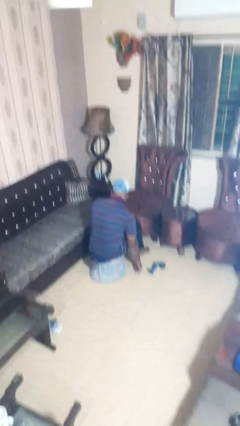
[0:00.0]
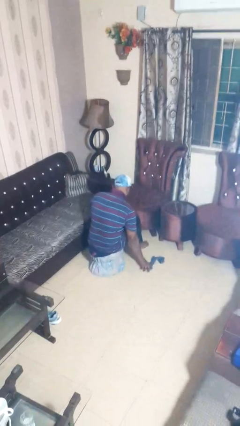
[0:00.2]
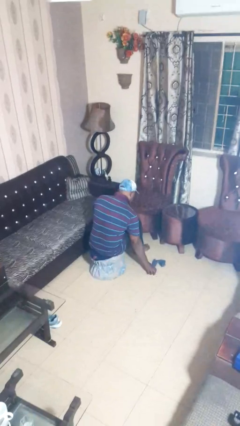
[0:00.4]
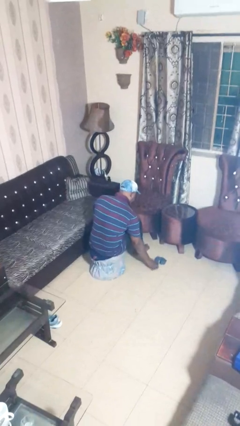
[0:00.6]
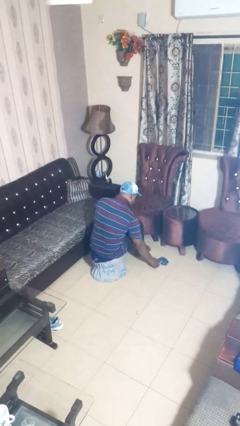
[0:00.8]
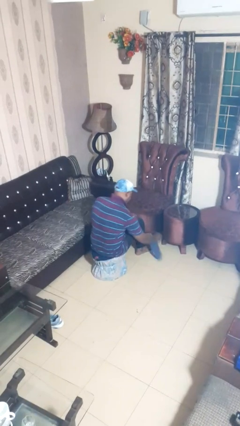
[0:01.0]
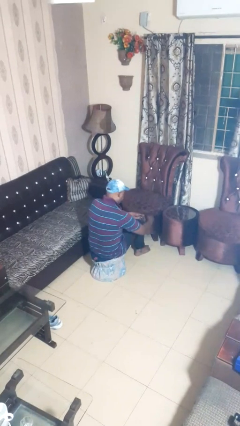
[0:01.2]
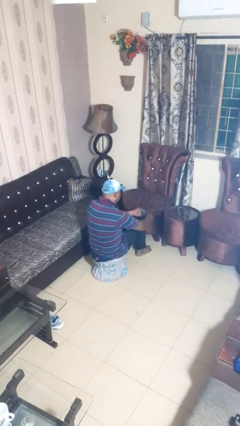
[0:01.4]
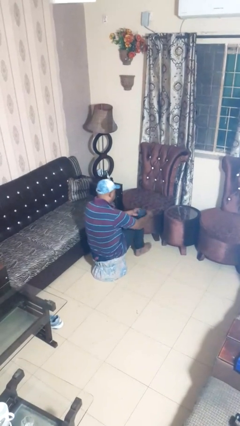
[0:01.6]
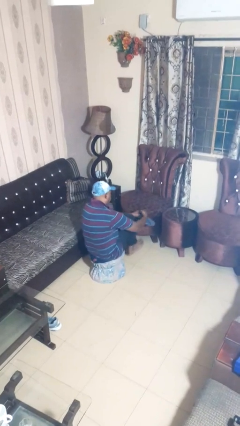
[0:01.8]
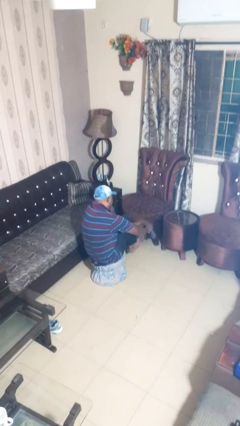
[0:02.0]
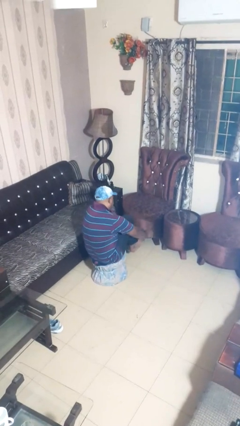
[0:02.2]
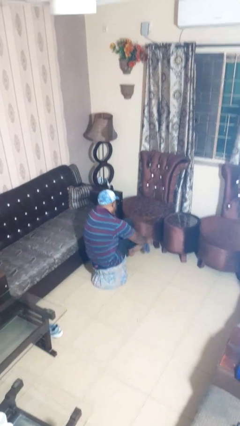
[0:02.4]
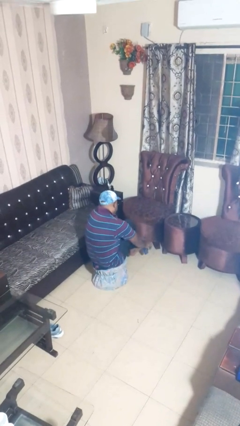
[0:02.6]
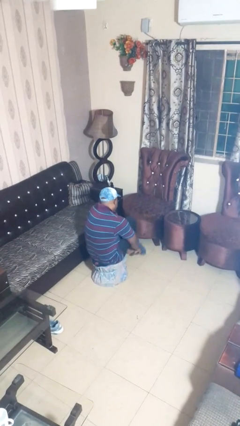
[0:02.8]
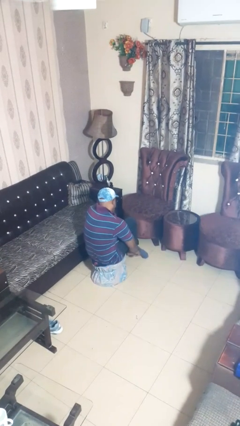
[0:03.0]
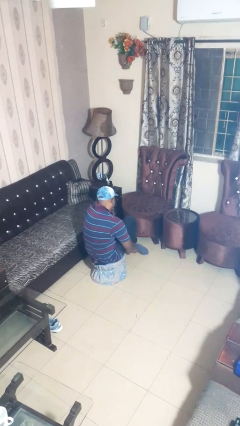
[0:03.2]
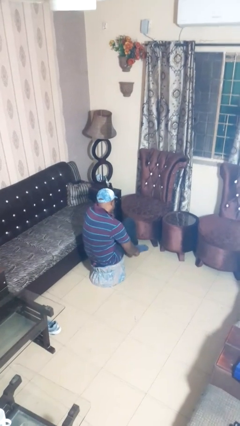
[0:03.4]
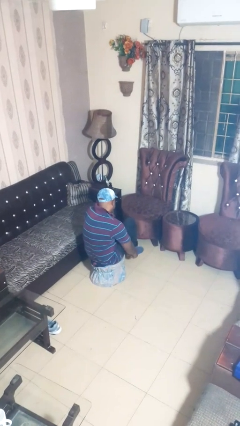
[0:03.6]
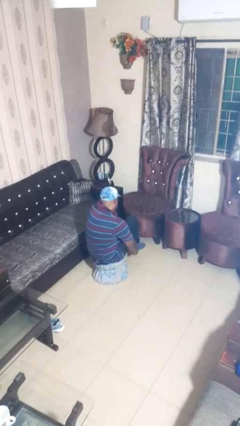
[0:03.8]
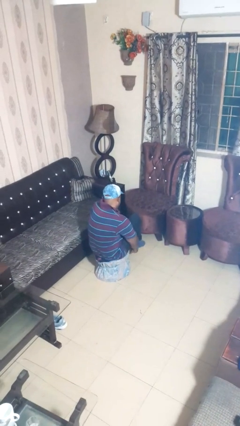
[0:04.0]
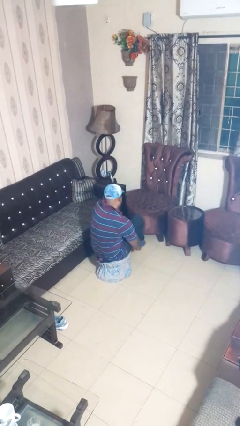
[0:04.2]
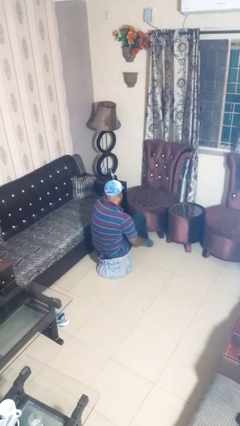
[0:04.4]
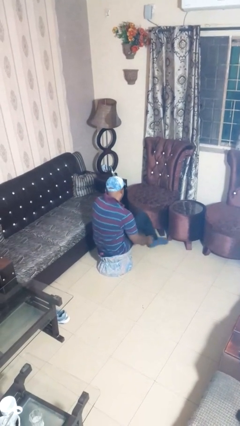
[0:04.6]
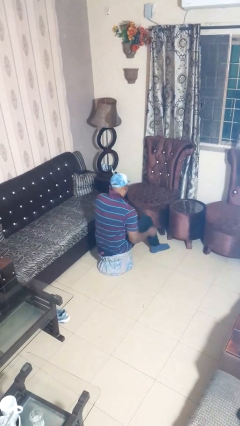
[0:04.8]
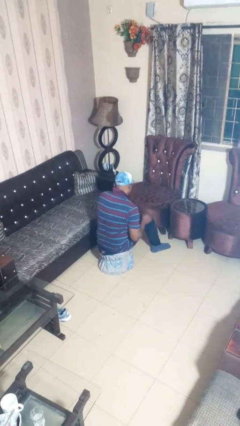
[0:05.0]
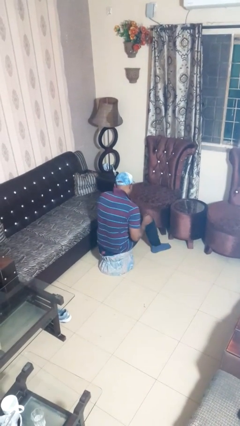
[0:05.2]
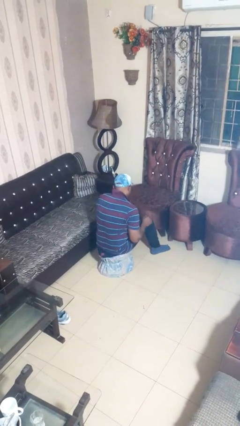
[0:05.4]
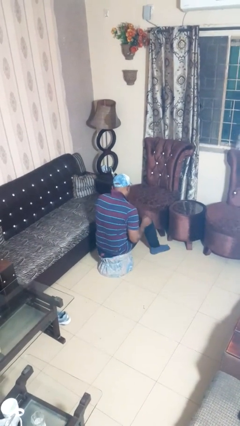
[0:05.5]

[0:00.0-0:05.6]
person puts on socks

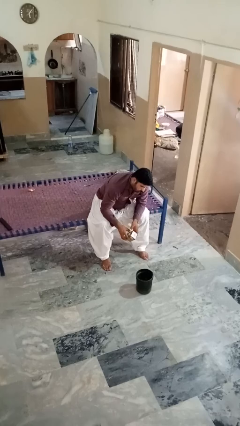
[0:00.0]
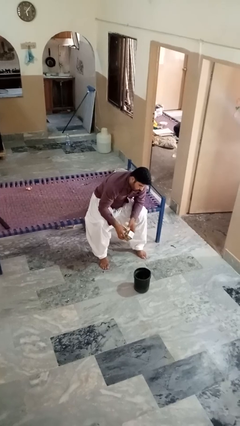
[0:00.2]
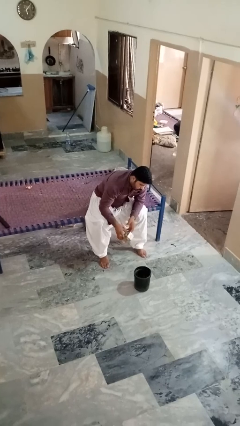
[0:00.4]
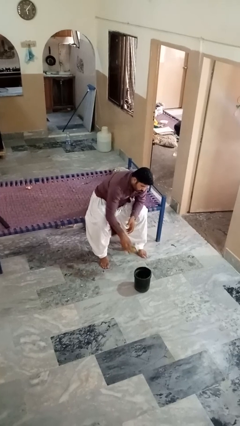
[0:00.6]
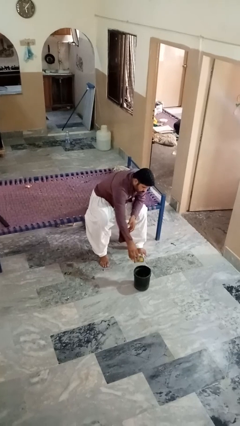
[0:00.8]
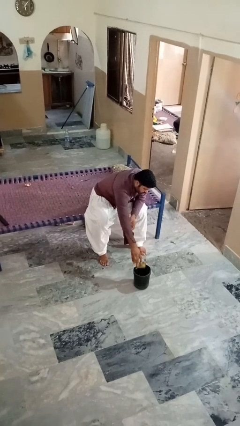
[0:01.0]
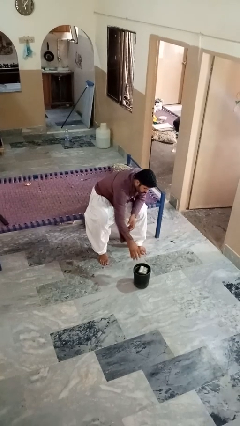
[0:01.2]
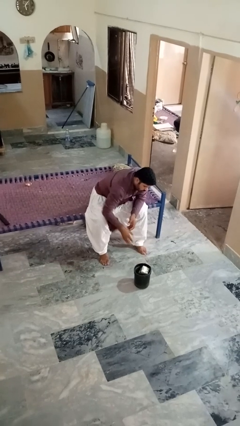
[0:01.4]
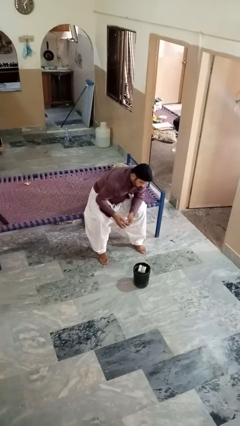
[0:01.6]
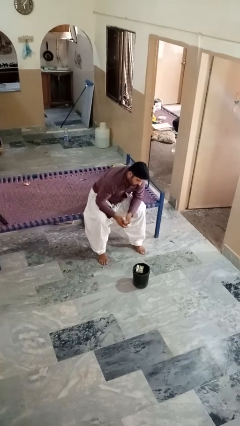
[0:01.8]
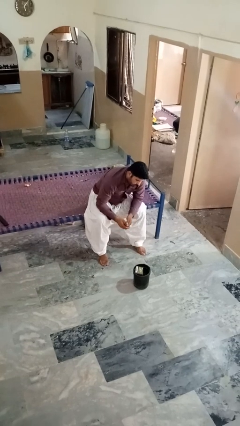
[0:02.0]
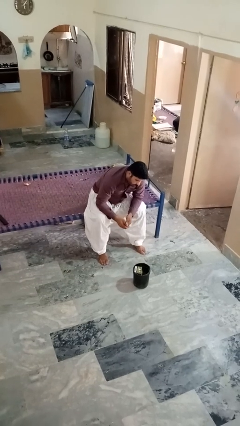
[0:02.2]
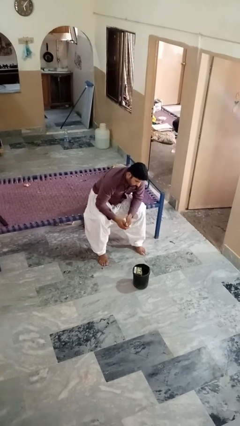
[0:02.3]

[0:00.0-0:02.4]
person puts object into basket

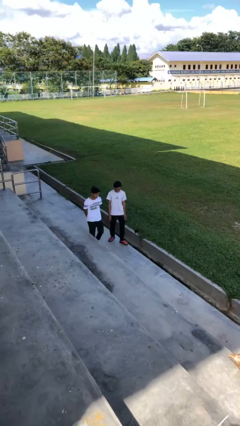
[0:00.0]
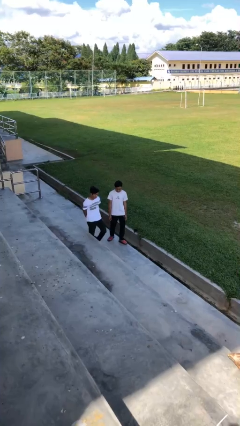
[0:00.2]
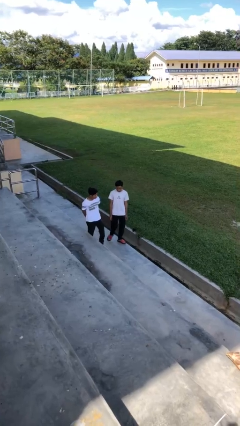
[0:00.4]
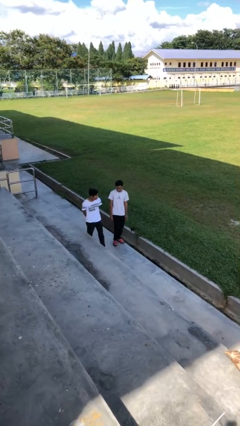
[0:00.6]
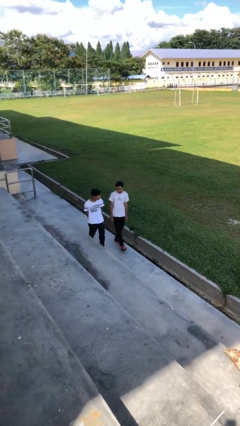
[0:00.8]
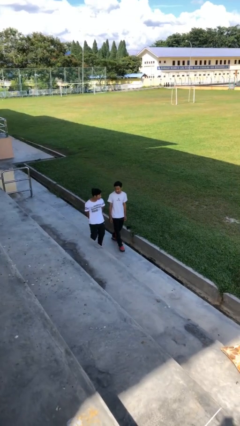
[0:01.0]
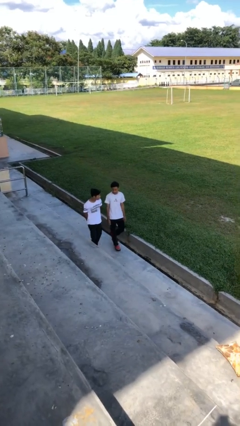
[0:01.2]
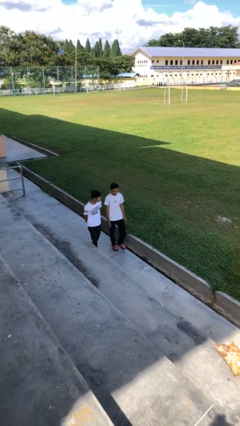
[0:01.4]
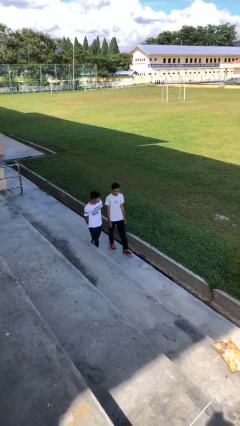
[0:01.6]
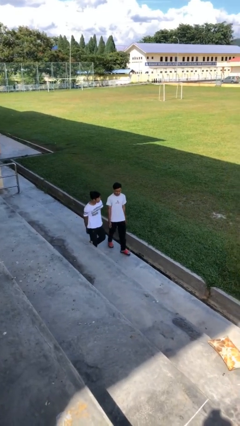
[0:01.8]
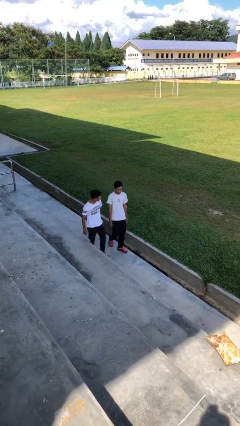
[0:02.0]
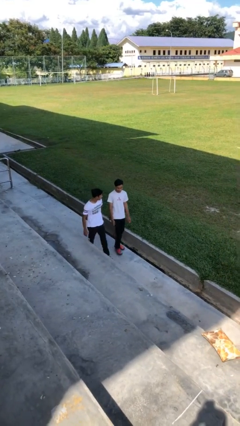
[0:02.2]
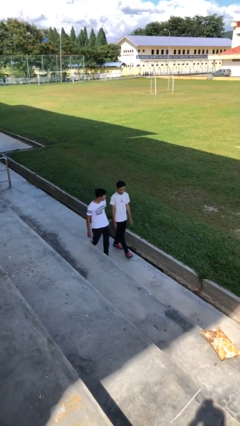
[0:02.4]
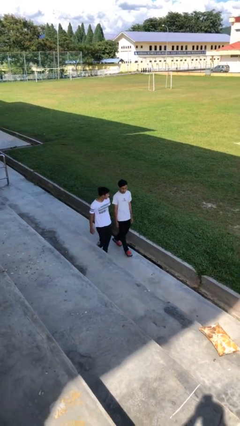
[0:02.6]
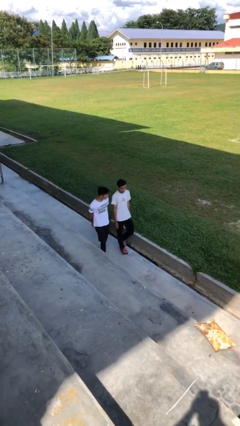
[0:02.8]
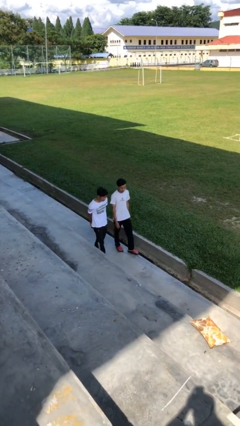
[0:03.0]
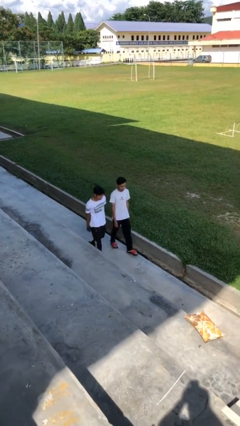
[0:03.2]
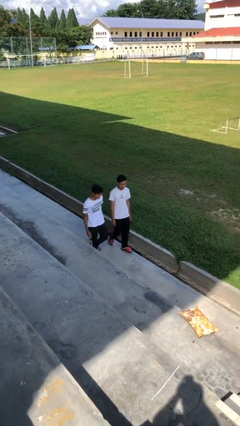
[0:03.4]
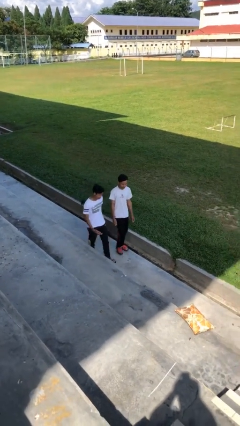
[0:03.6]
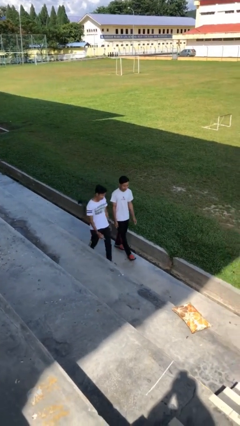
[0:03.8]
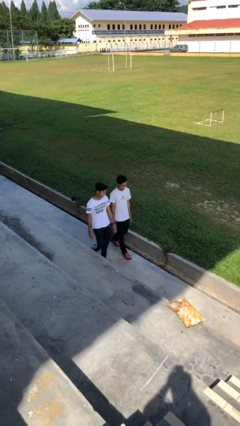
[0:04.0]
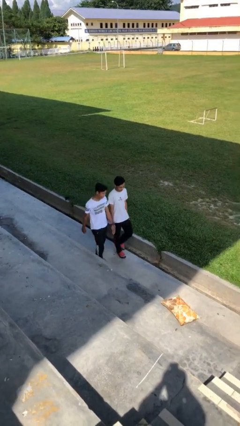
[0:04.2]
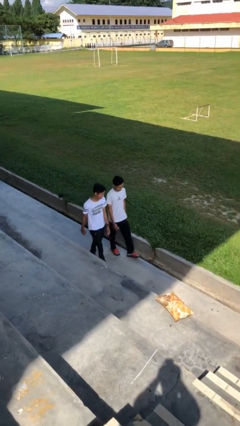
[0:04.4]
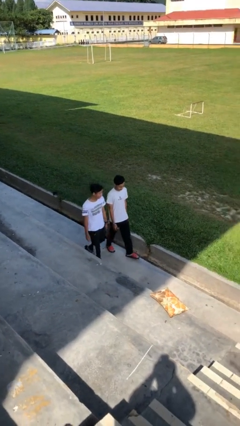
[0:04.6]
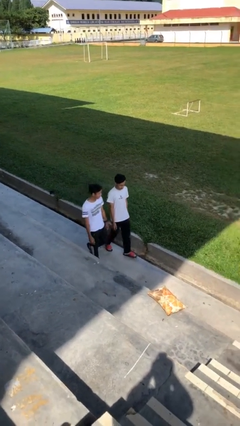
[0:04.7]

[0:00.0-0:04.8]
person talks to person

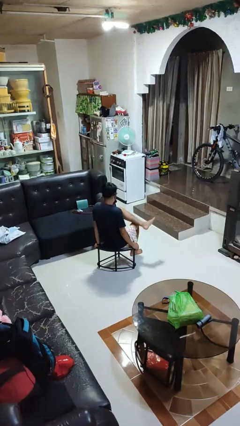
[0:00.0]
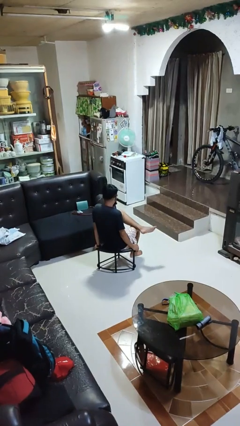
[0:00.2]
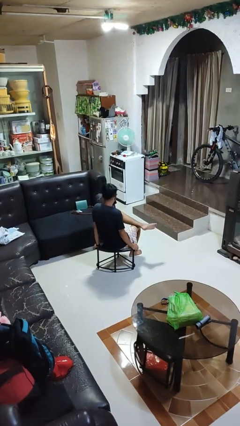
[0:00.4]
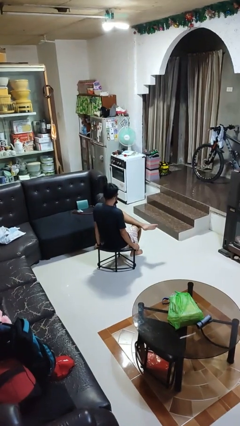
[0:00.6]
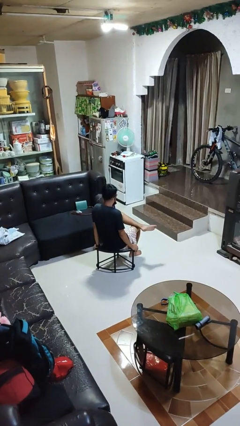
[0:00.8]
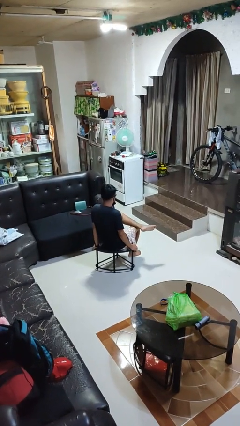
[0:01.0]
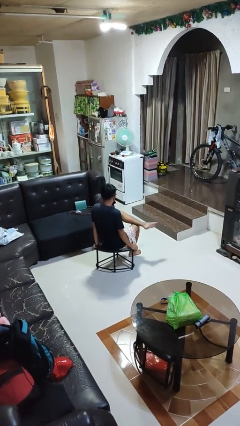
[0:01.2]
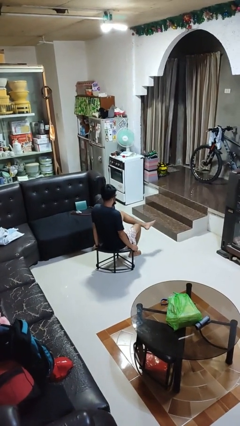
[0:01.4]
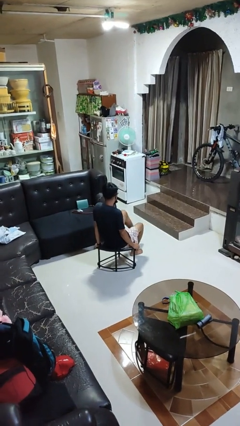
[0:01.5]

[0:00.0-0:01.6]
person crosses legs

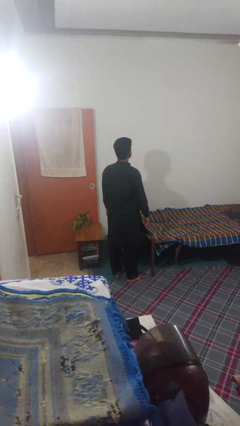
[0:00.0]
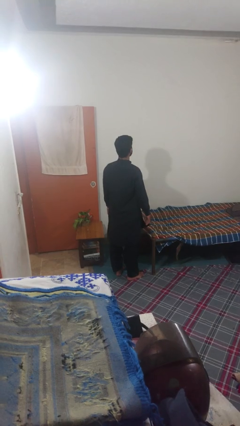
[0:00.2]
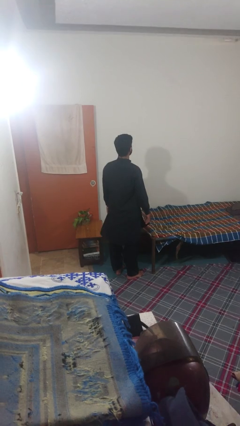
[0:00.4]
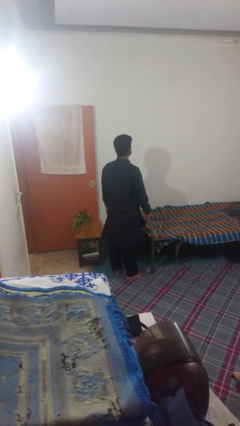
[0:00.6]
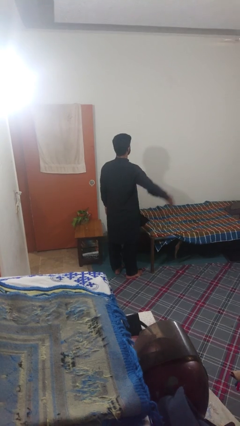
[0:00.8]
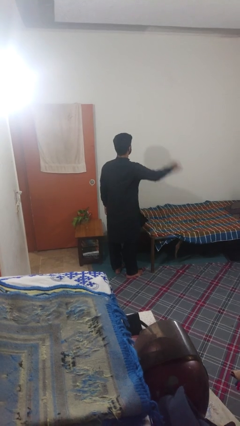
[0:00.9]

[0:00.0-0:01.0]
person salutes

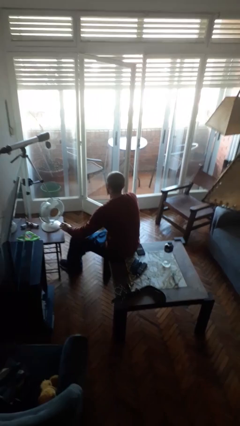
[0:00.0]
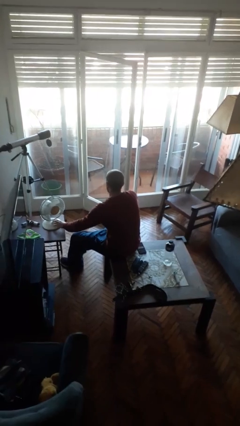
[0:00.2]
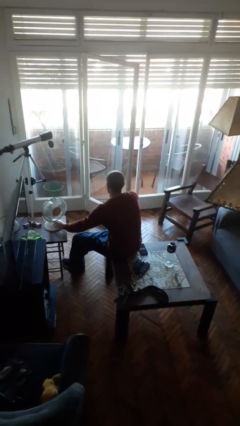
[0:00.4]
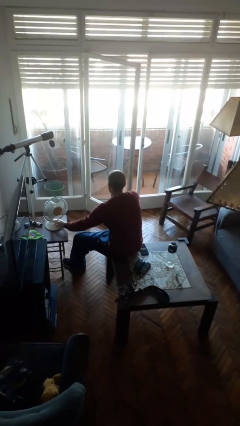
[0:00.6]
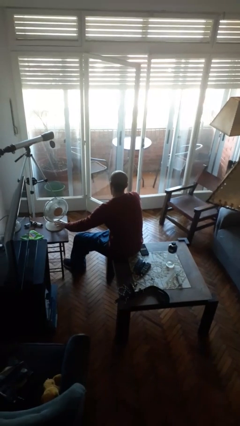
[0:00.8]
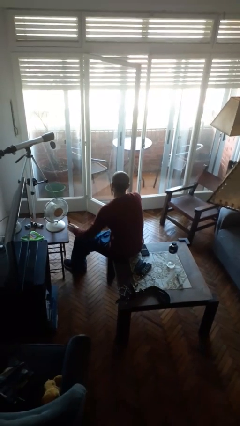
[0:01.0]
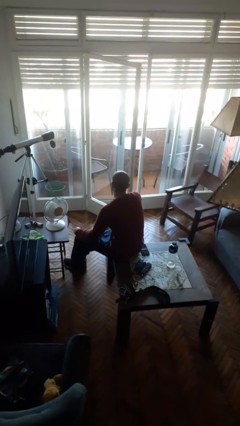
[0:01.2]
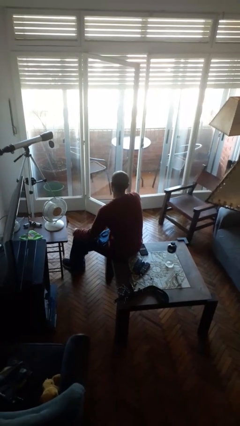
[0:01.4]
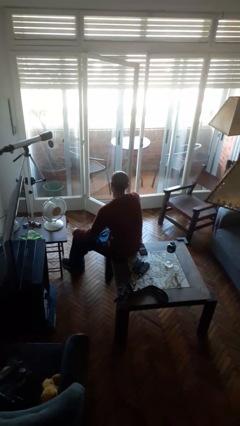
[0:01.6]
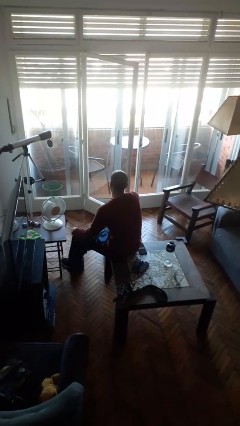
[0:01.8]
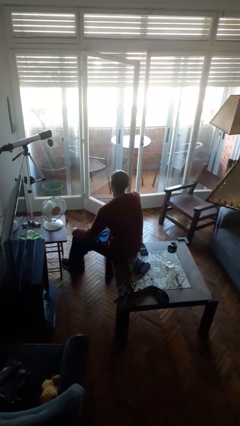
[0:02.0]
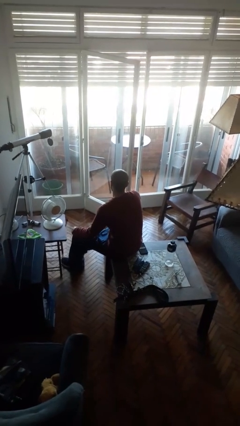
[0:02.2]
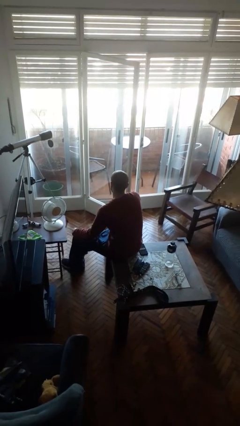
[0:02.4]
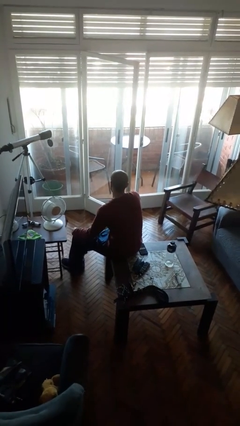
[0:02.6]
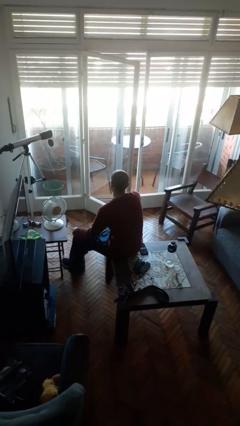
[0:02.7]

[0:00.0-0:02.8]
person turns on fan
